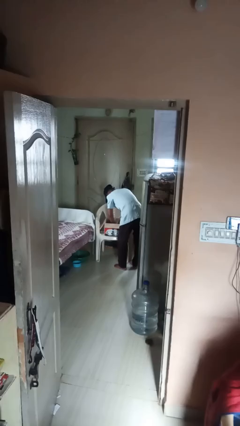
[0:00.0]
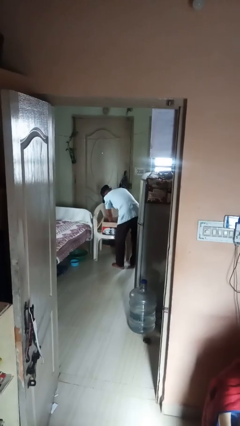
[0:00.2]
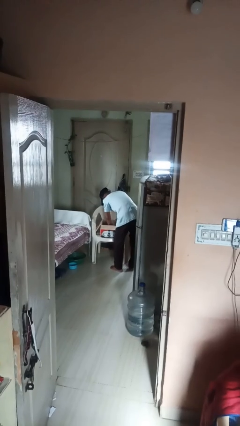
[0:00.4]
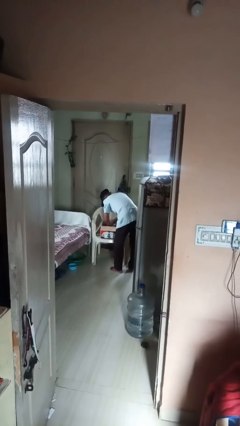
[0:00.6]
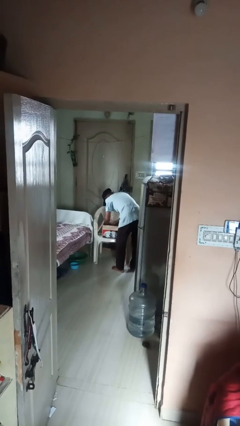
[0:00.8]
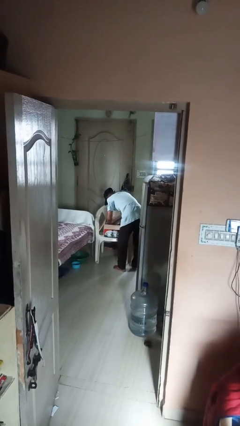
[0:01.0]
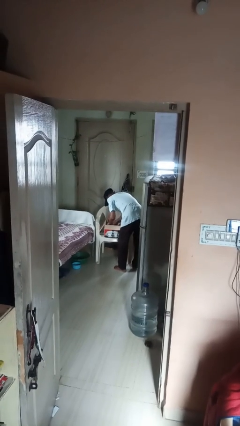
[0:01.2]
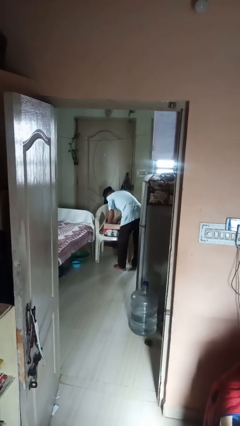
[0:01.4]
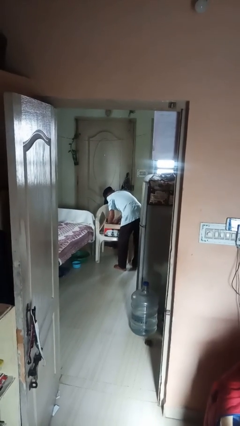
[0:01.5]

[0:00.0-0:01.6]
person searches in box

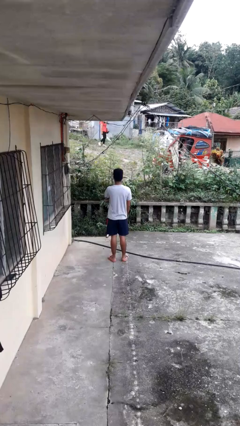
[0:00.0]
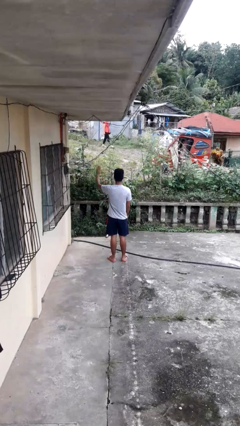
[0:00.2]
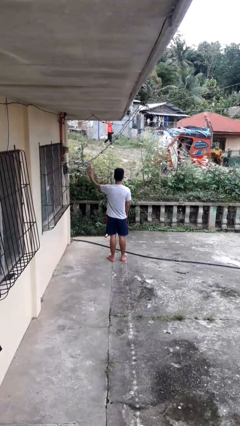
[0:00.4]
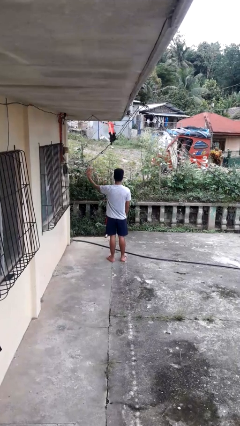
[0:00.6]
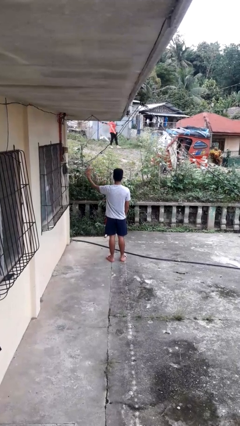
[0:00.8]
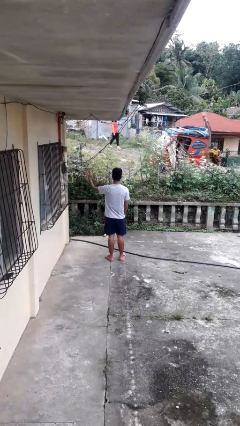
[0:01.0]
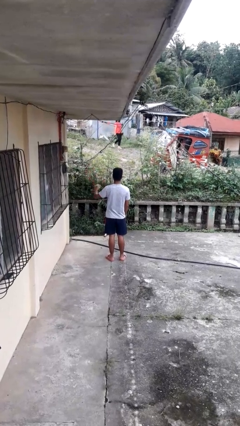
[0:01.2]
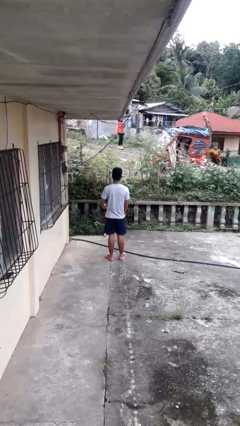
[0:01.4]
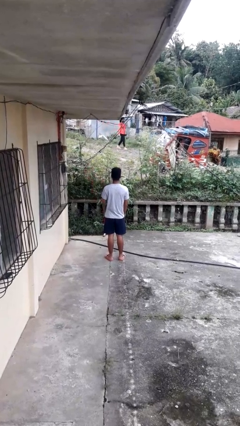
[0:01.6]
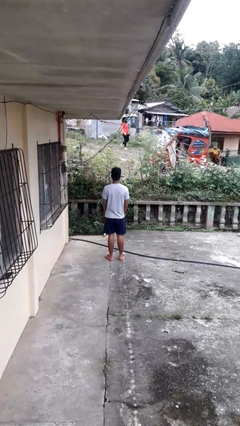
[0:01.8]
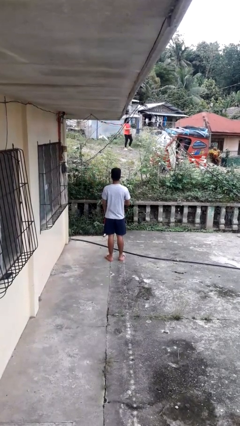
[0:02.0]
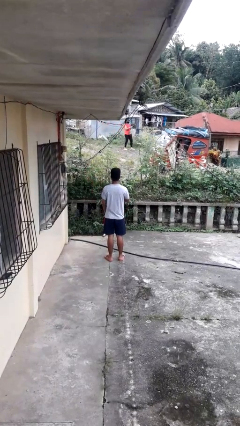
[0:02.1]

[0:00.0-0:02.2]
person gestures swipe left

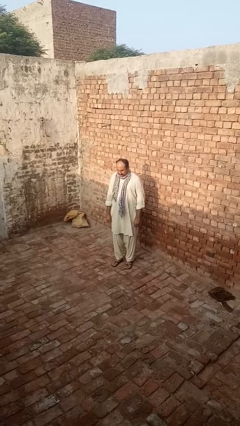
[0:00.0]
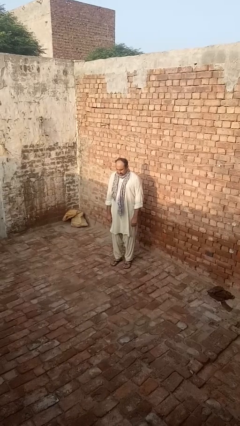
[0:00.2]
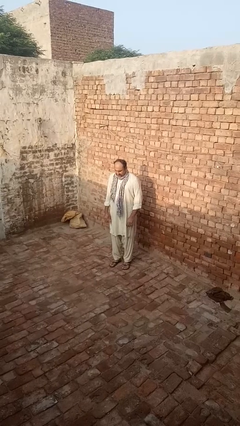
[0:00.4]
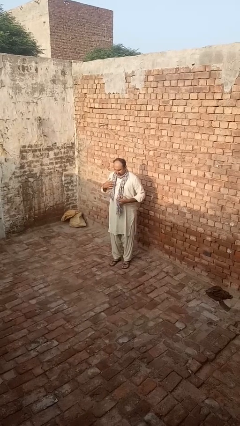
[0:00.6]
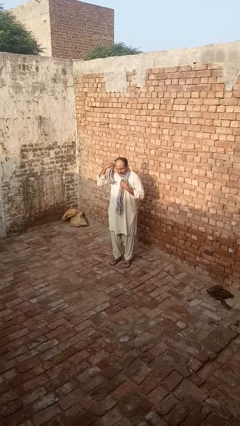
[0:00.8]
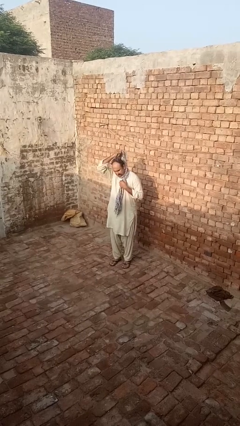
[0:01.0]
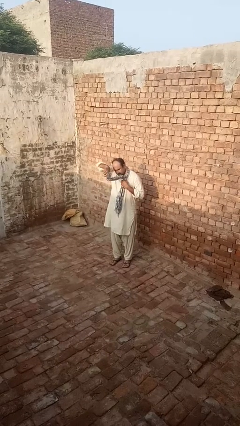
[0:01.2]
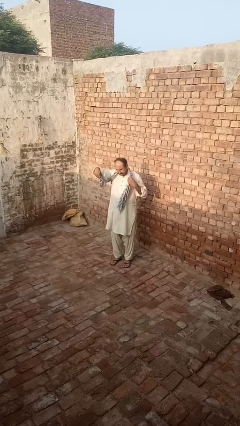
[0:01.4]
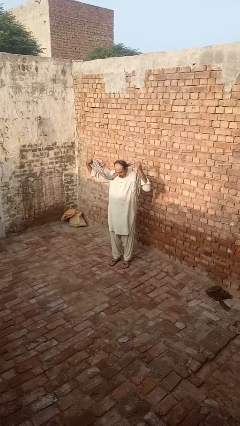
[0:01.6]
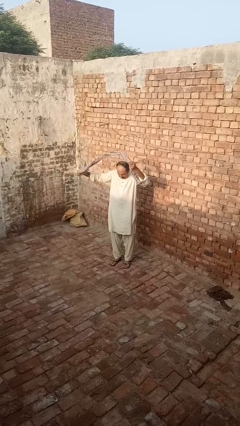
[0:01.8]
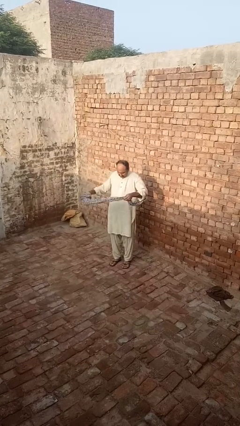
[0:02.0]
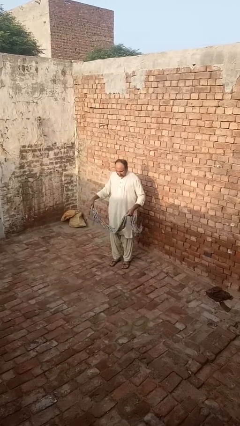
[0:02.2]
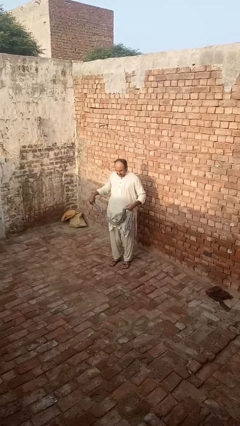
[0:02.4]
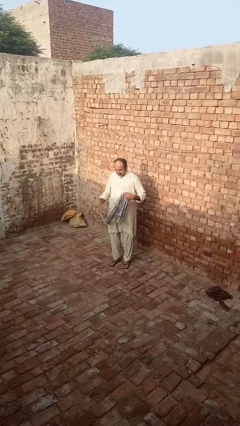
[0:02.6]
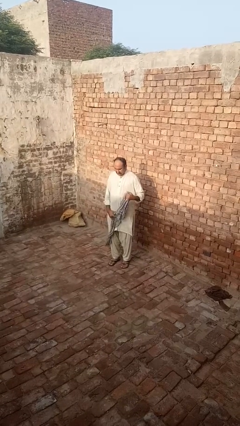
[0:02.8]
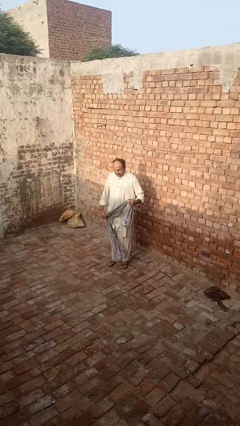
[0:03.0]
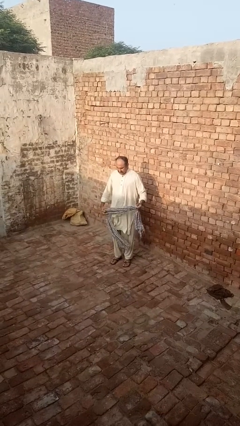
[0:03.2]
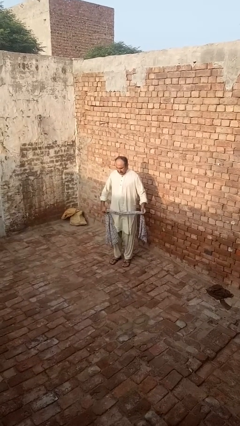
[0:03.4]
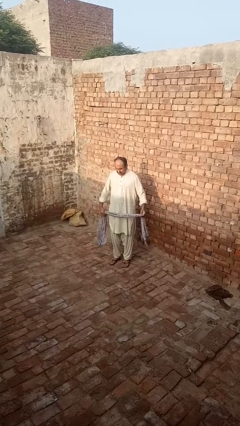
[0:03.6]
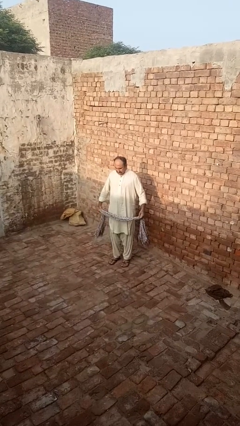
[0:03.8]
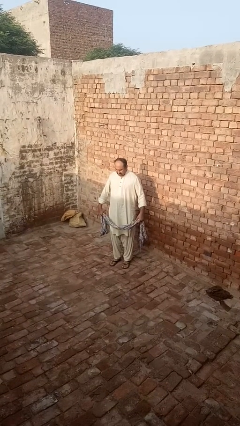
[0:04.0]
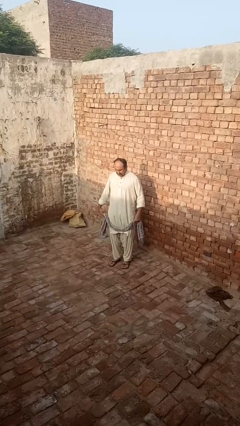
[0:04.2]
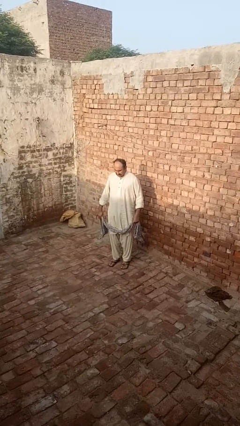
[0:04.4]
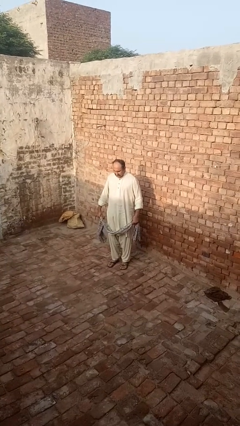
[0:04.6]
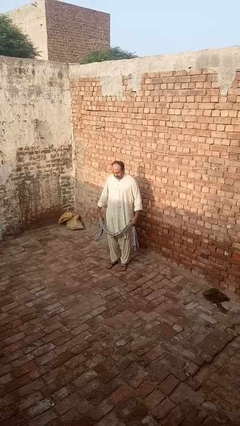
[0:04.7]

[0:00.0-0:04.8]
person takes off scarf

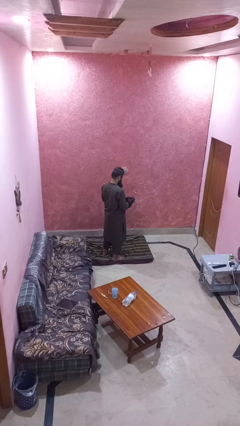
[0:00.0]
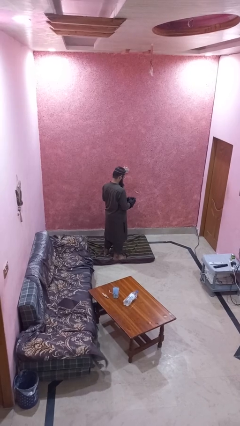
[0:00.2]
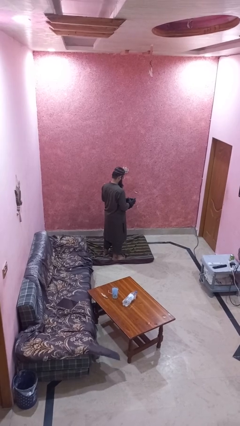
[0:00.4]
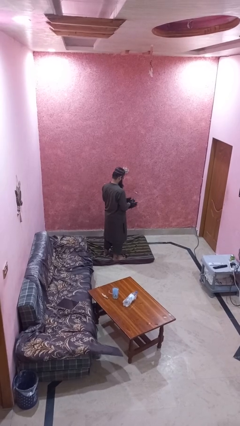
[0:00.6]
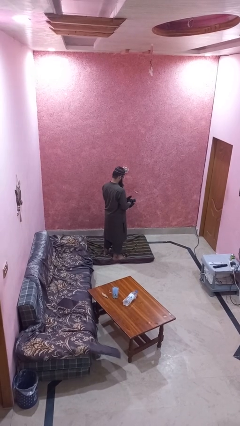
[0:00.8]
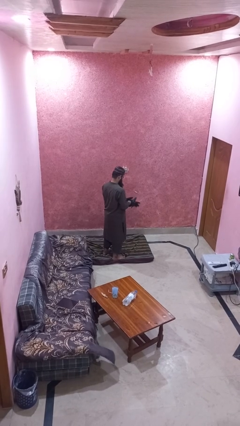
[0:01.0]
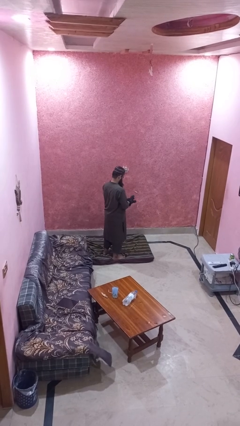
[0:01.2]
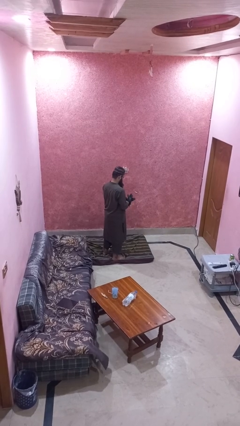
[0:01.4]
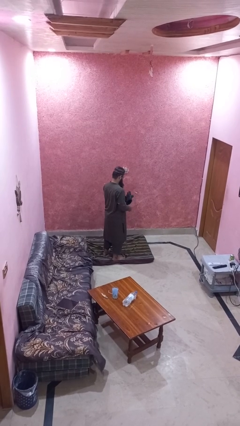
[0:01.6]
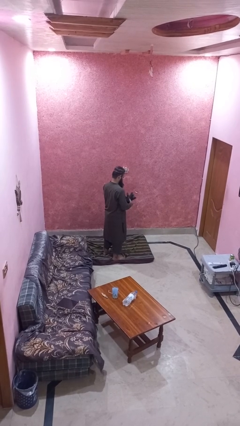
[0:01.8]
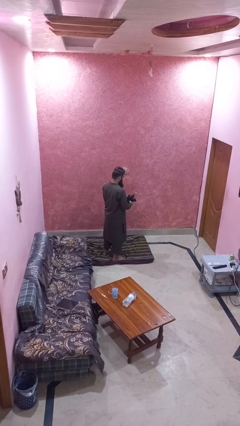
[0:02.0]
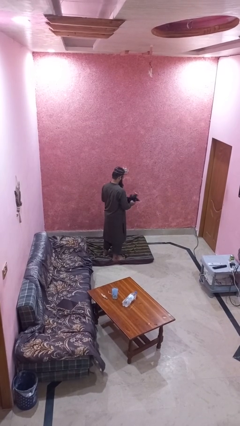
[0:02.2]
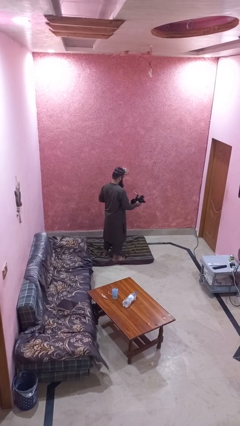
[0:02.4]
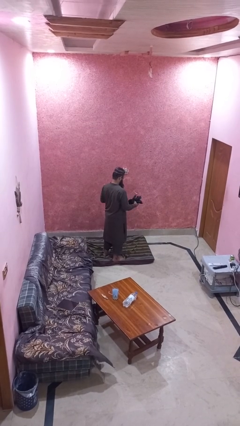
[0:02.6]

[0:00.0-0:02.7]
person takes off gloves

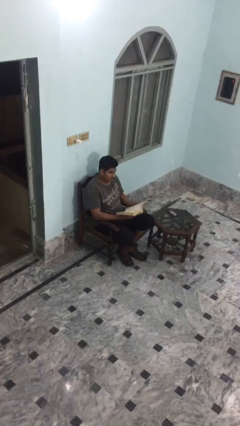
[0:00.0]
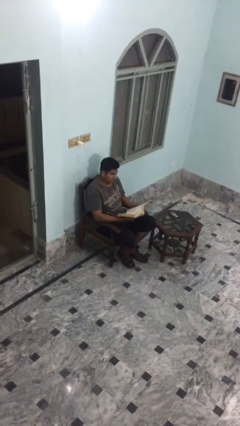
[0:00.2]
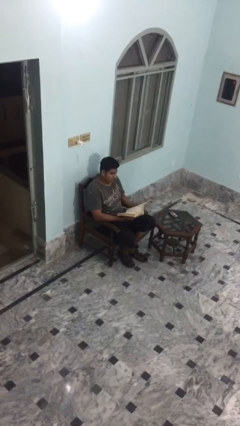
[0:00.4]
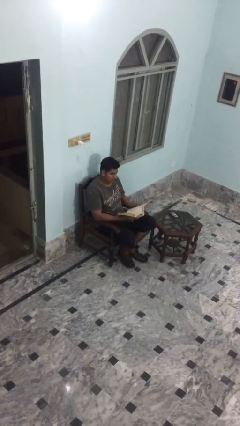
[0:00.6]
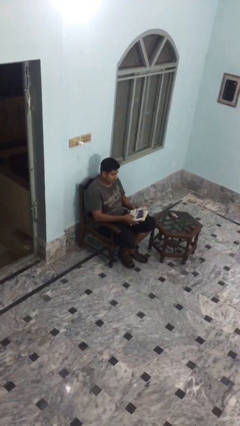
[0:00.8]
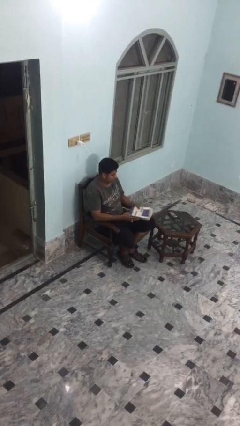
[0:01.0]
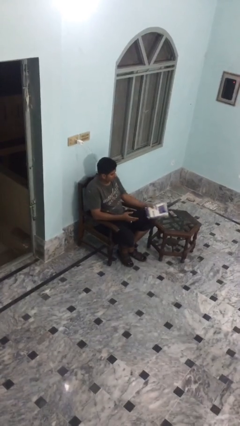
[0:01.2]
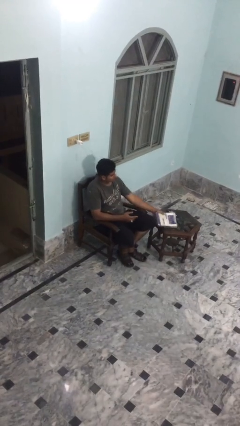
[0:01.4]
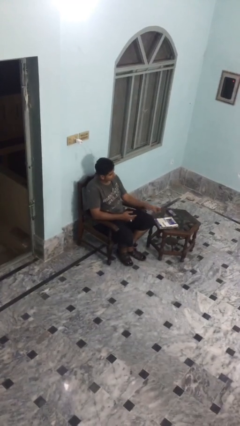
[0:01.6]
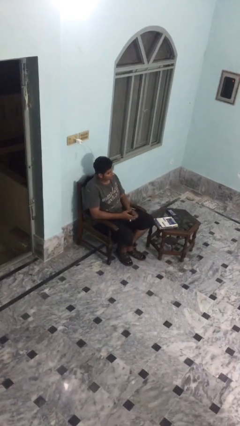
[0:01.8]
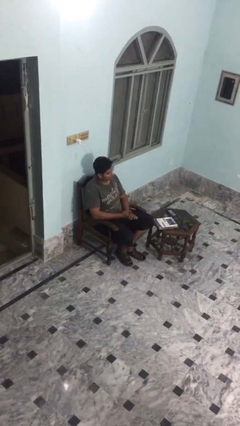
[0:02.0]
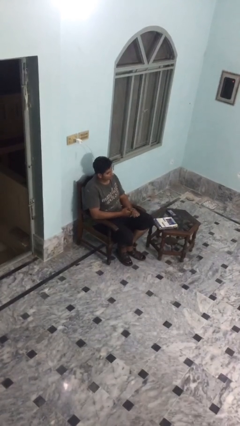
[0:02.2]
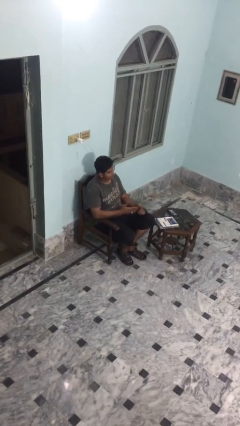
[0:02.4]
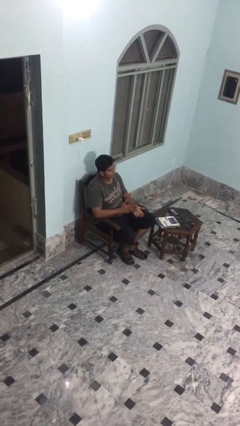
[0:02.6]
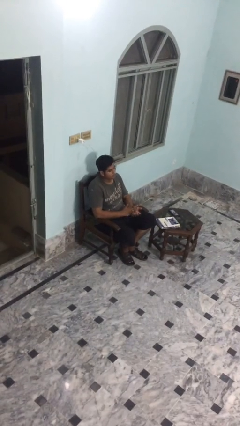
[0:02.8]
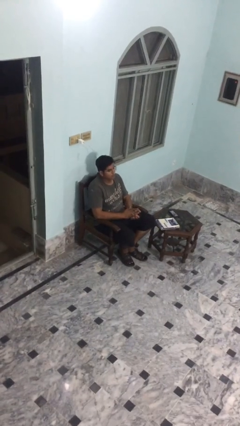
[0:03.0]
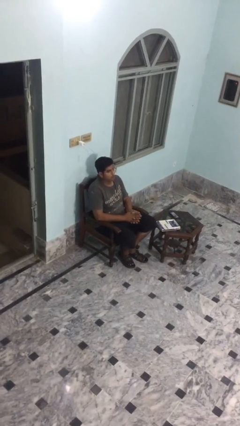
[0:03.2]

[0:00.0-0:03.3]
person puts down object on table

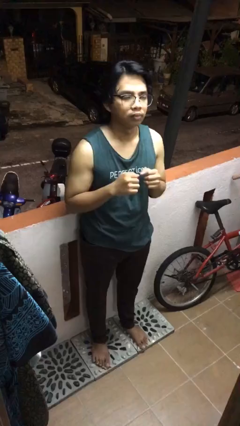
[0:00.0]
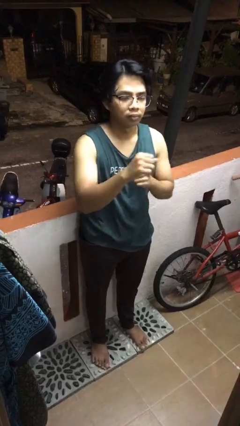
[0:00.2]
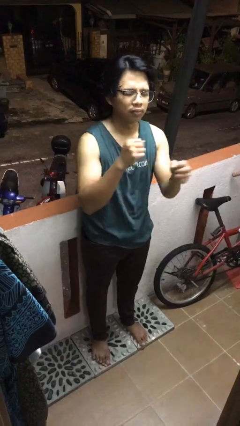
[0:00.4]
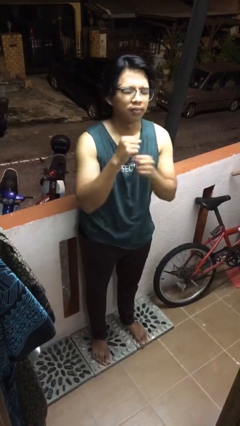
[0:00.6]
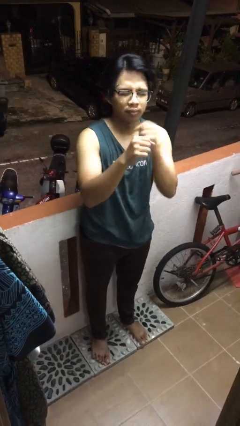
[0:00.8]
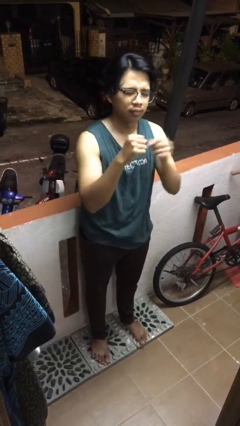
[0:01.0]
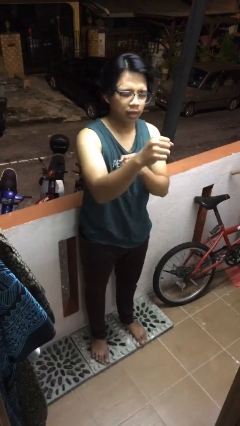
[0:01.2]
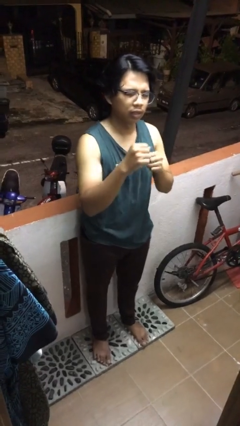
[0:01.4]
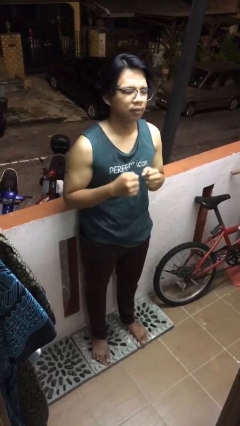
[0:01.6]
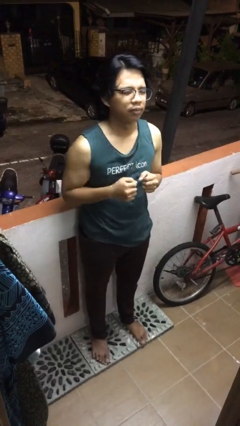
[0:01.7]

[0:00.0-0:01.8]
person punches

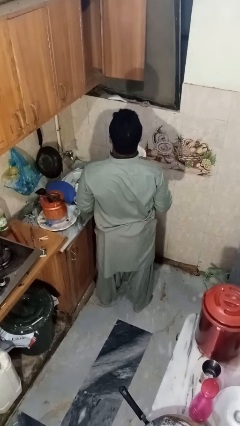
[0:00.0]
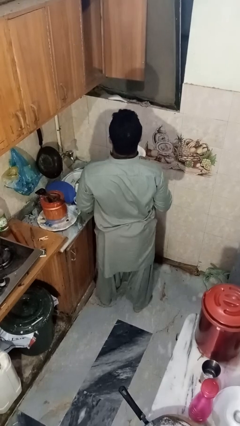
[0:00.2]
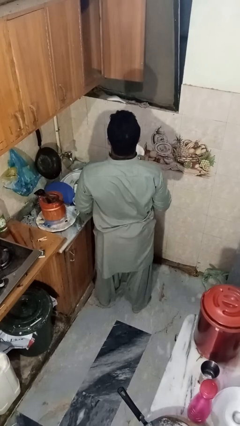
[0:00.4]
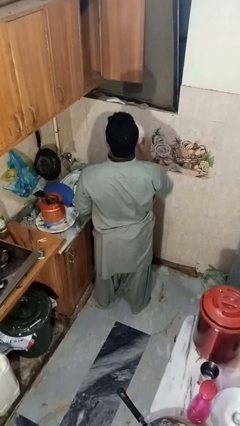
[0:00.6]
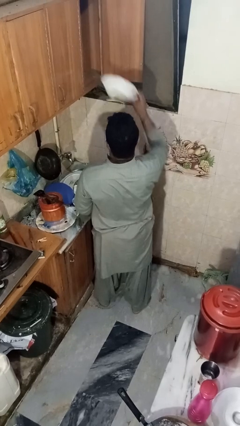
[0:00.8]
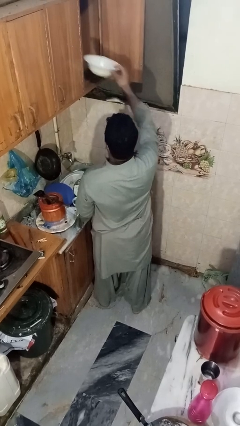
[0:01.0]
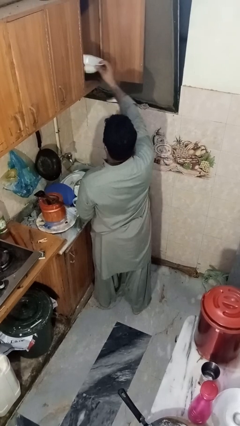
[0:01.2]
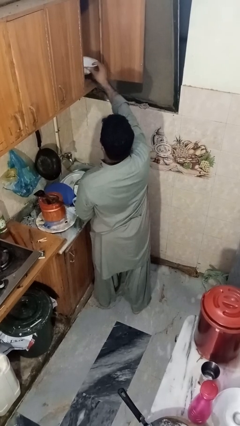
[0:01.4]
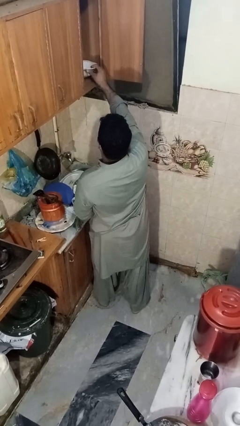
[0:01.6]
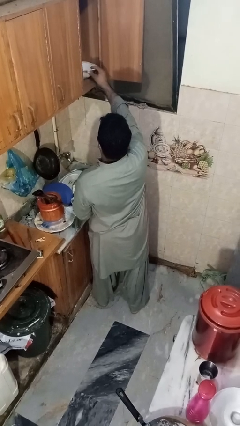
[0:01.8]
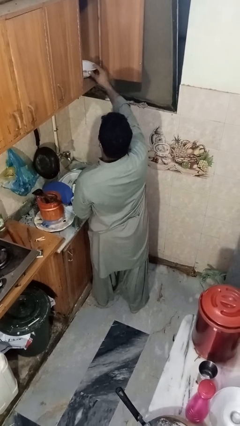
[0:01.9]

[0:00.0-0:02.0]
person puts object in cabinet
